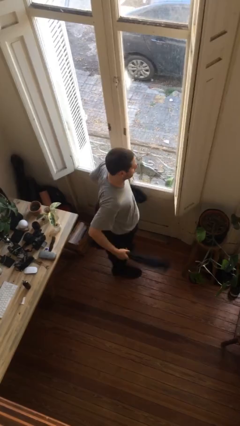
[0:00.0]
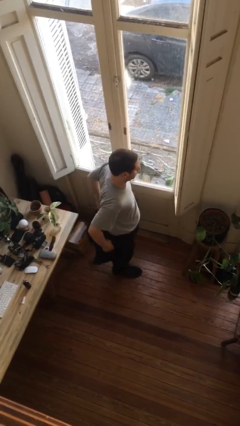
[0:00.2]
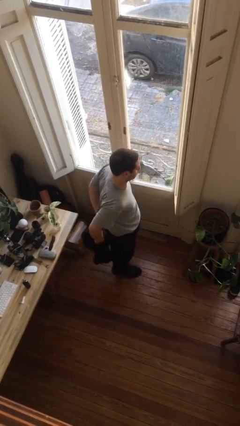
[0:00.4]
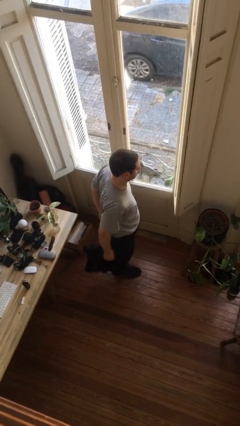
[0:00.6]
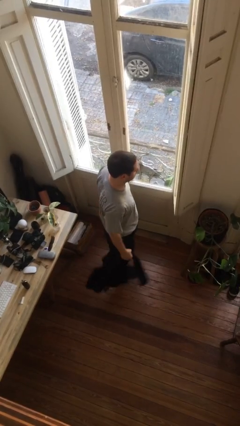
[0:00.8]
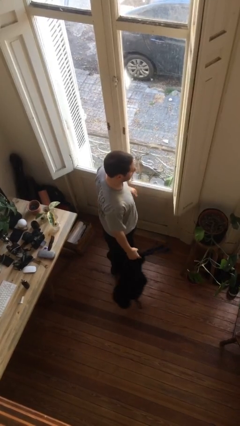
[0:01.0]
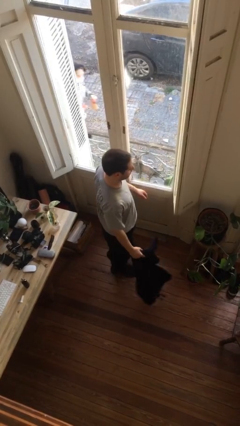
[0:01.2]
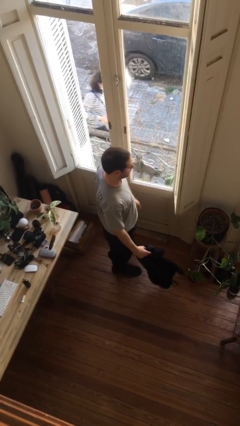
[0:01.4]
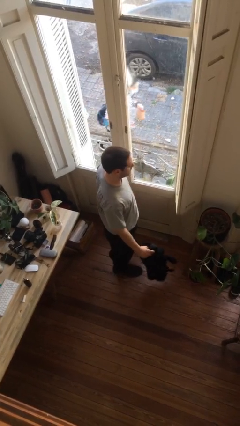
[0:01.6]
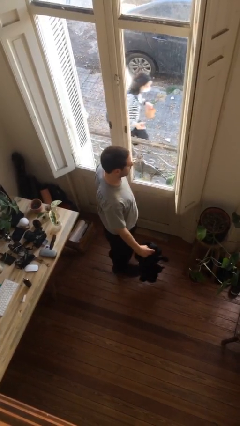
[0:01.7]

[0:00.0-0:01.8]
person unties jacket around waist

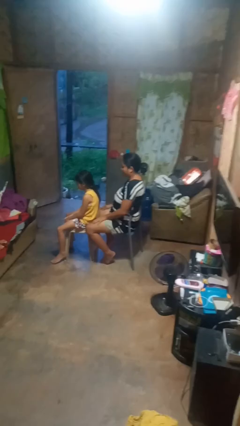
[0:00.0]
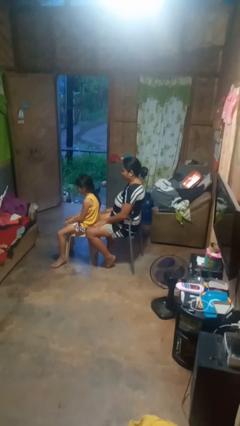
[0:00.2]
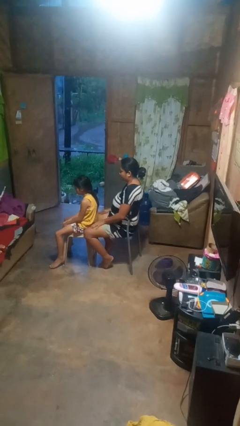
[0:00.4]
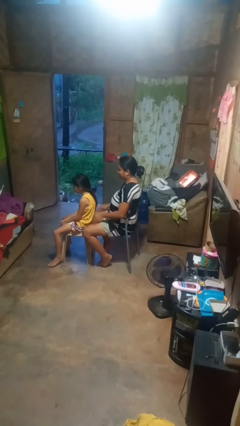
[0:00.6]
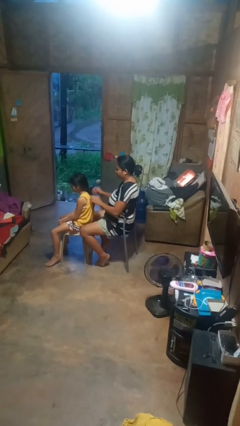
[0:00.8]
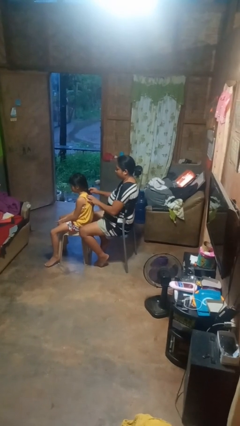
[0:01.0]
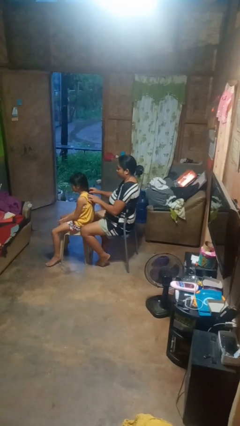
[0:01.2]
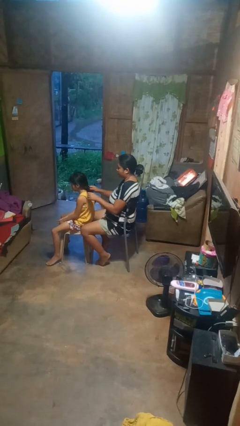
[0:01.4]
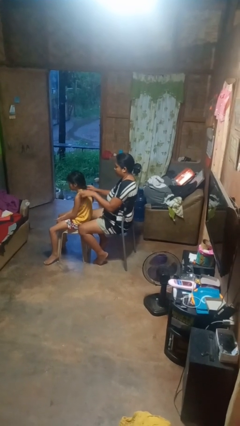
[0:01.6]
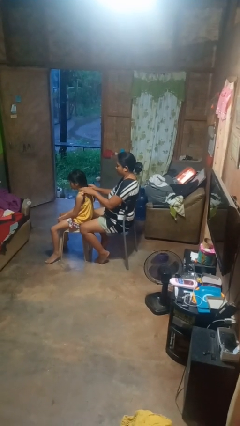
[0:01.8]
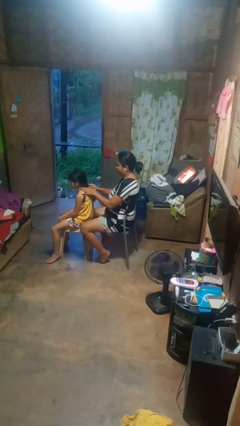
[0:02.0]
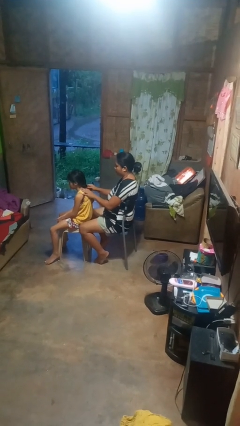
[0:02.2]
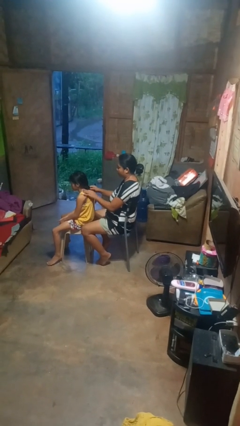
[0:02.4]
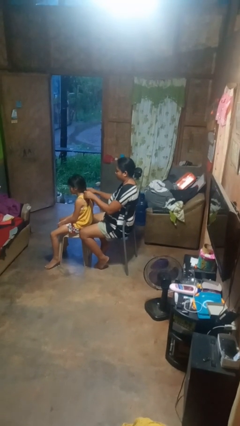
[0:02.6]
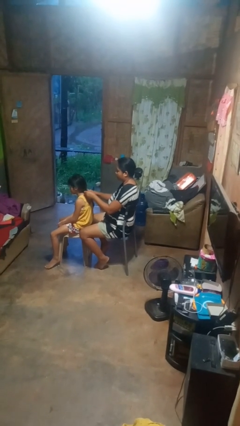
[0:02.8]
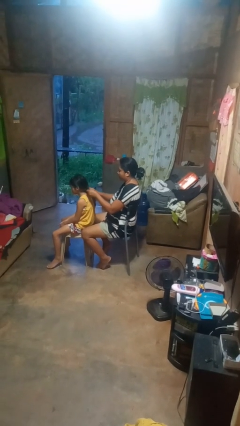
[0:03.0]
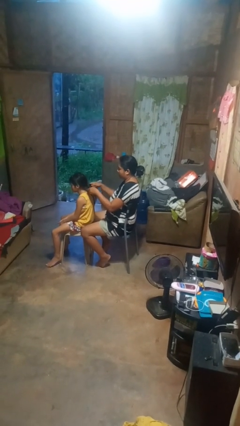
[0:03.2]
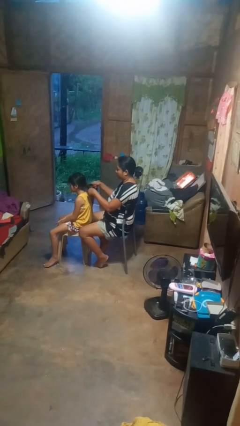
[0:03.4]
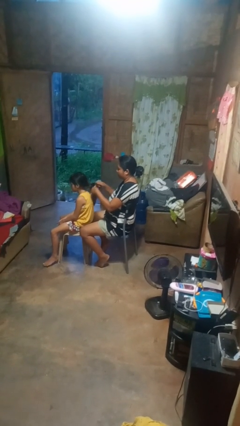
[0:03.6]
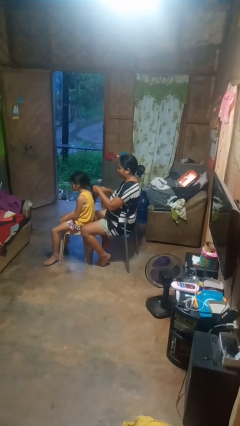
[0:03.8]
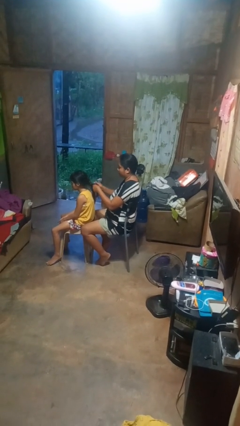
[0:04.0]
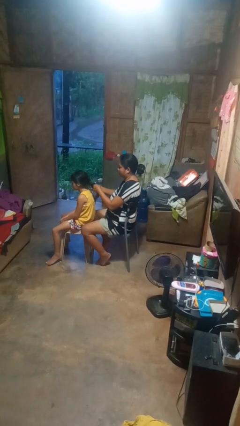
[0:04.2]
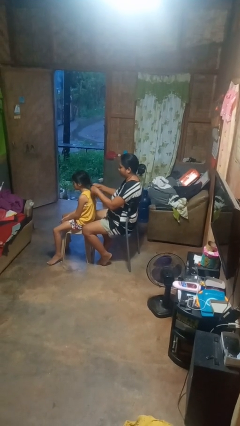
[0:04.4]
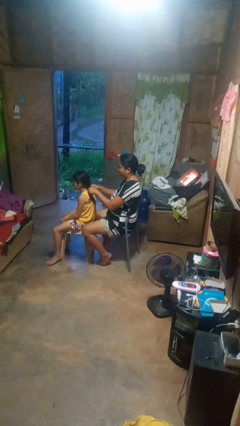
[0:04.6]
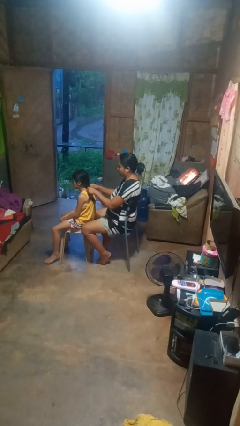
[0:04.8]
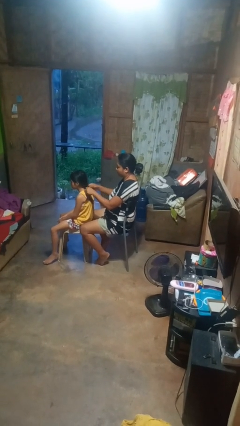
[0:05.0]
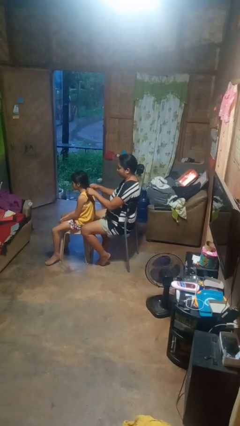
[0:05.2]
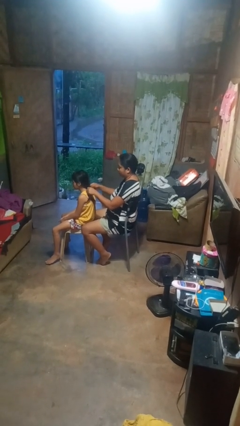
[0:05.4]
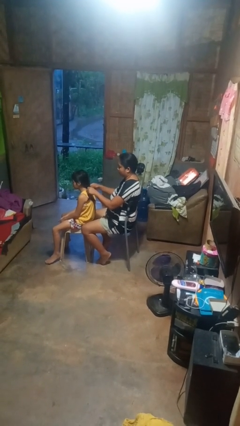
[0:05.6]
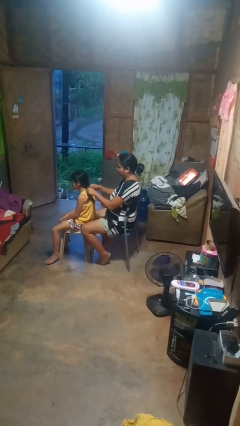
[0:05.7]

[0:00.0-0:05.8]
person braids hair of person

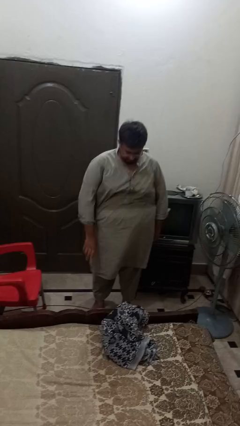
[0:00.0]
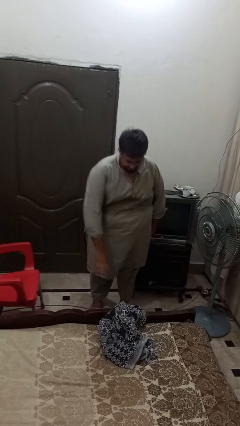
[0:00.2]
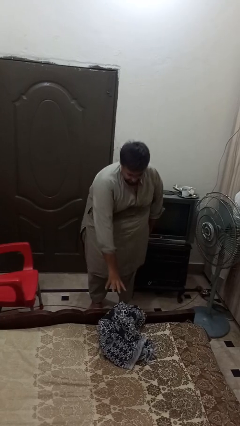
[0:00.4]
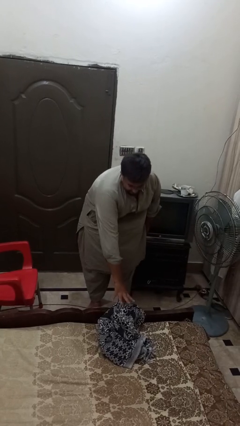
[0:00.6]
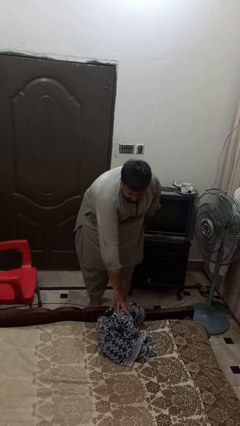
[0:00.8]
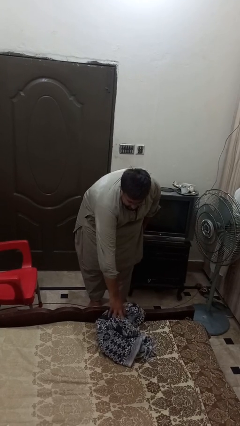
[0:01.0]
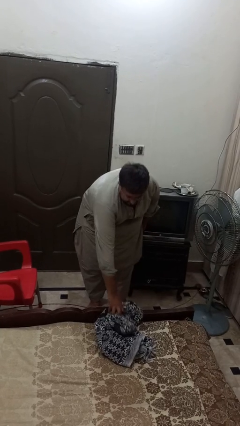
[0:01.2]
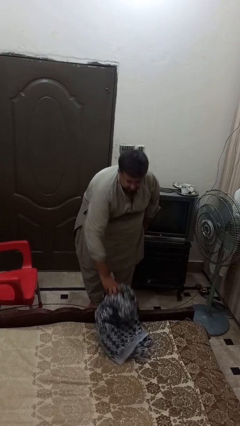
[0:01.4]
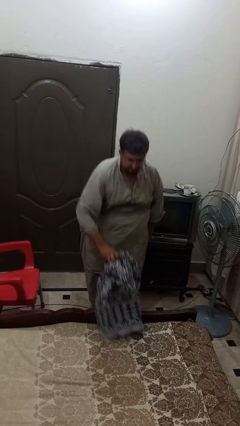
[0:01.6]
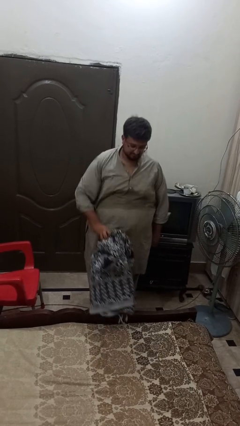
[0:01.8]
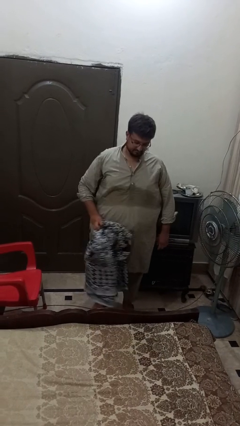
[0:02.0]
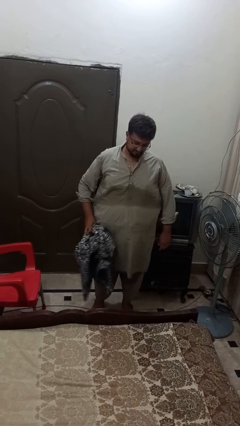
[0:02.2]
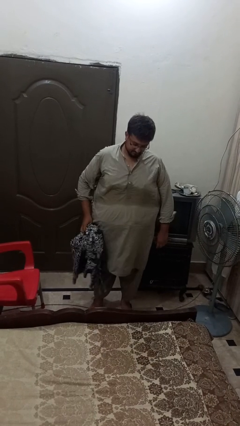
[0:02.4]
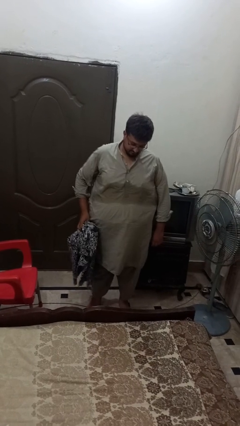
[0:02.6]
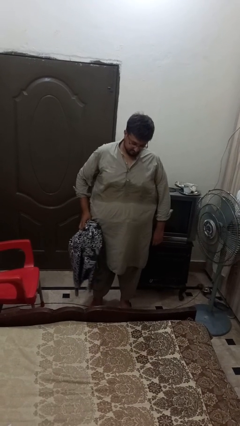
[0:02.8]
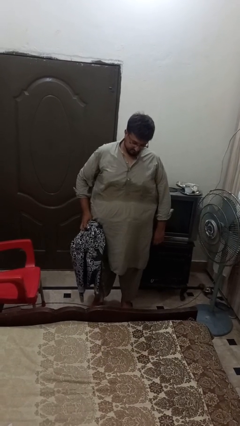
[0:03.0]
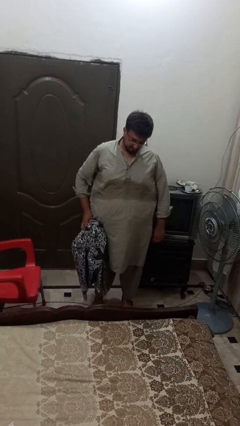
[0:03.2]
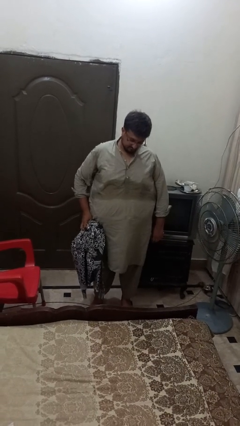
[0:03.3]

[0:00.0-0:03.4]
person picks up object from bed

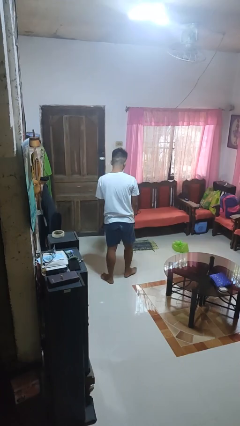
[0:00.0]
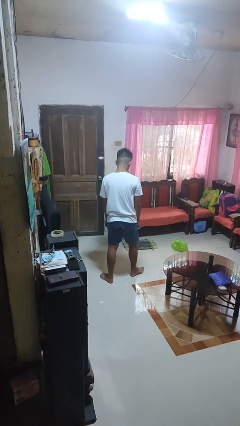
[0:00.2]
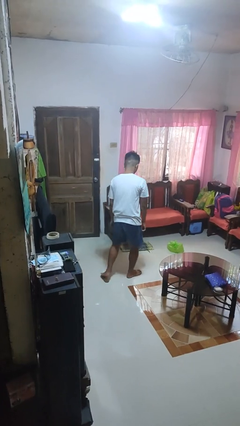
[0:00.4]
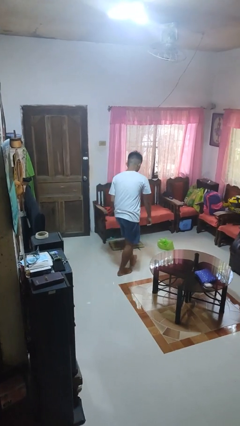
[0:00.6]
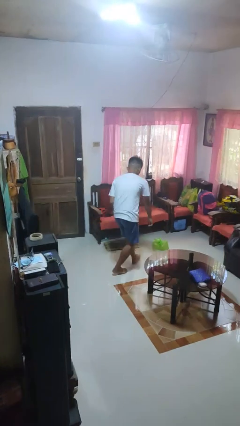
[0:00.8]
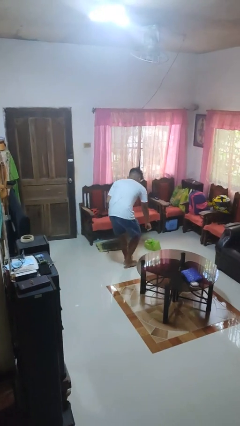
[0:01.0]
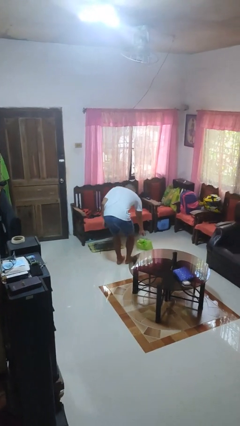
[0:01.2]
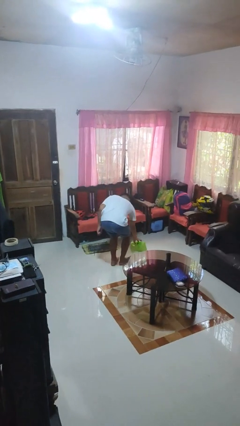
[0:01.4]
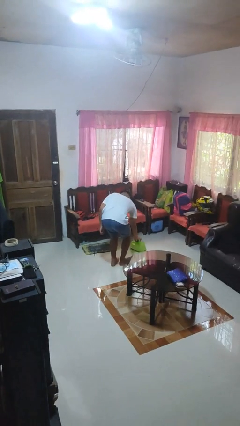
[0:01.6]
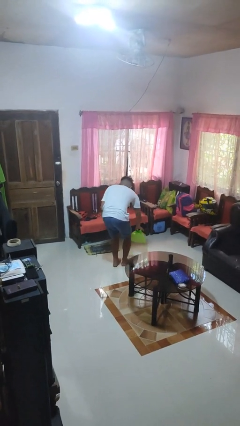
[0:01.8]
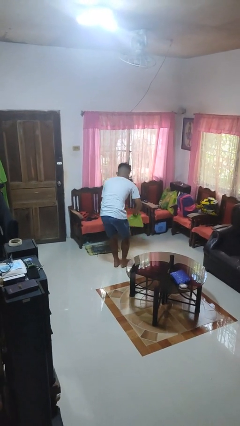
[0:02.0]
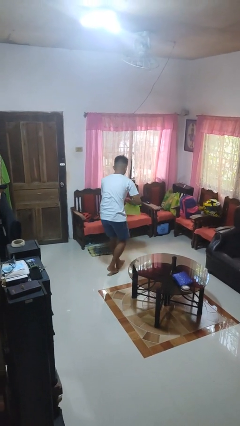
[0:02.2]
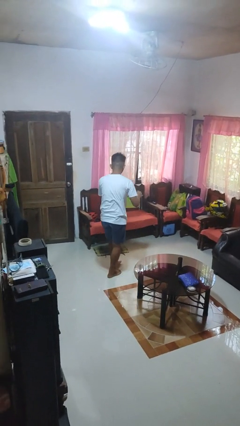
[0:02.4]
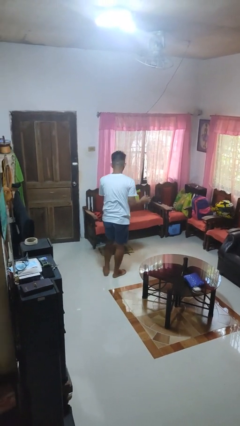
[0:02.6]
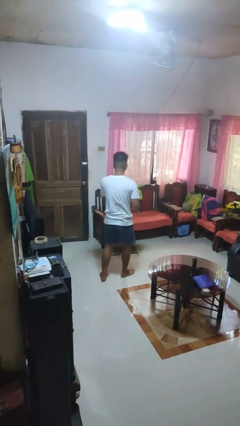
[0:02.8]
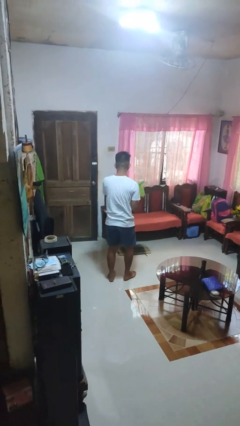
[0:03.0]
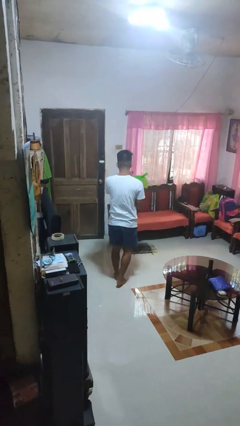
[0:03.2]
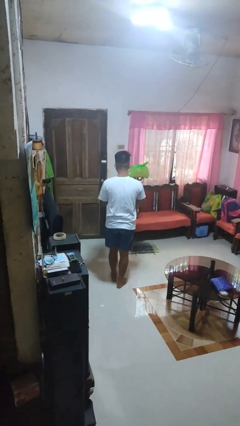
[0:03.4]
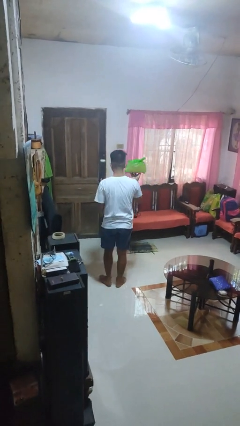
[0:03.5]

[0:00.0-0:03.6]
person picks up object from floor

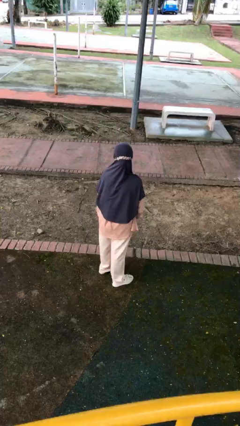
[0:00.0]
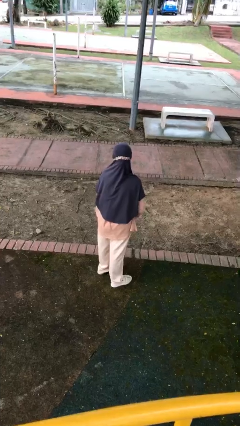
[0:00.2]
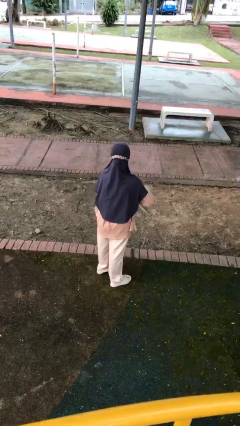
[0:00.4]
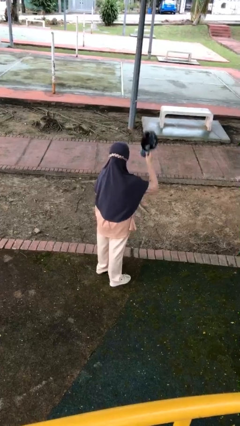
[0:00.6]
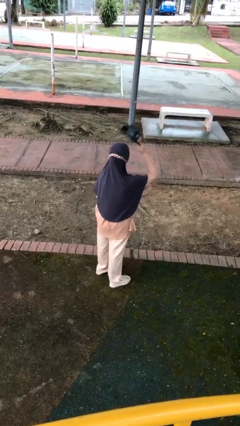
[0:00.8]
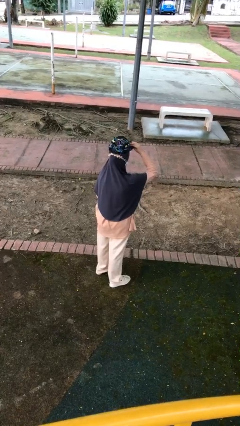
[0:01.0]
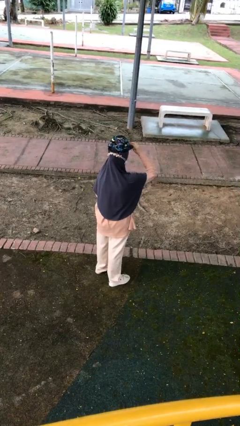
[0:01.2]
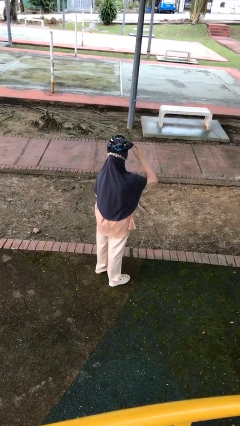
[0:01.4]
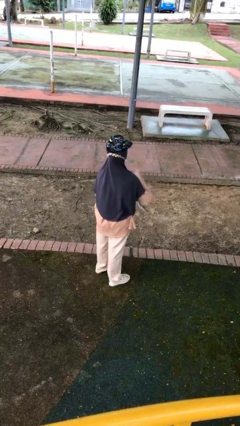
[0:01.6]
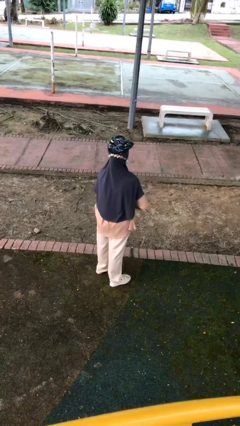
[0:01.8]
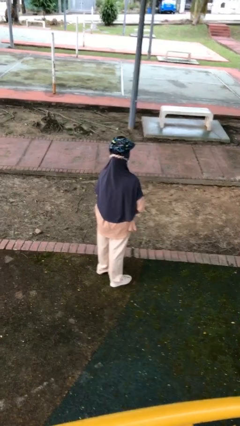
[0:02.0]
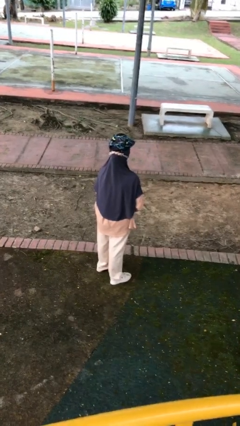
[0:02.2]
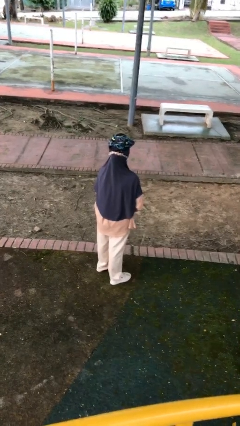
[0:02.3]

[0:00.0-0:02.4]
person puts on hat
